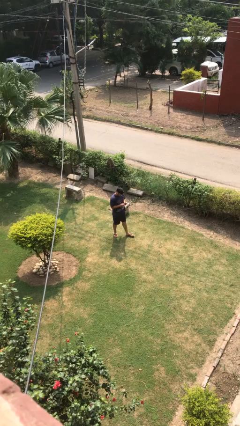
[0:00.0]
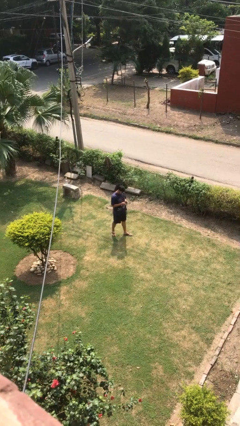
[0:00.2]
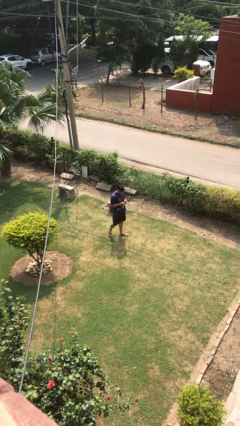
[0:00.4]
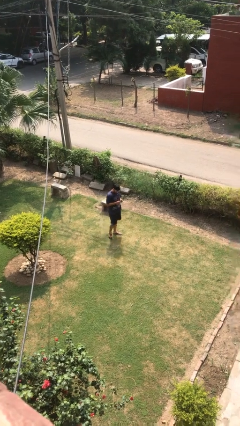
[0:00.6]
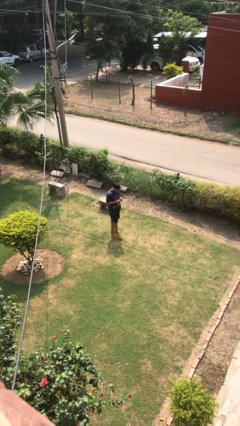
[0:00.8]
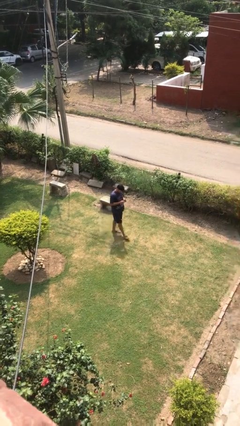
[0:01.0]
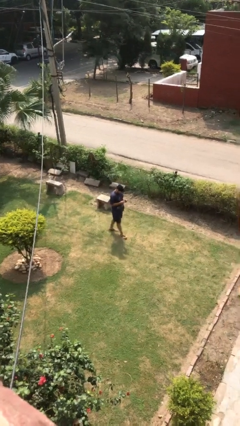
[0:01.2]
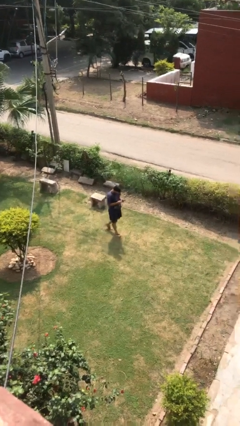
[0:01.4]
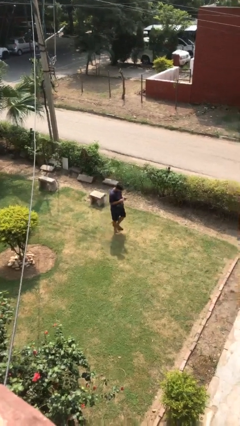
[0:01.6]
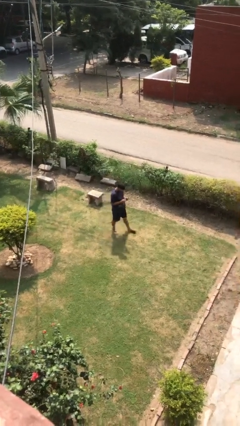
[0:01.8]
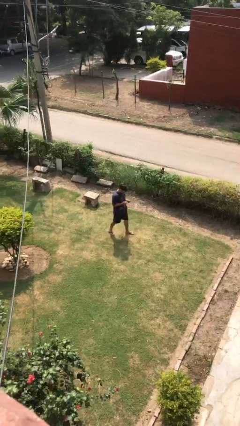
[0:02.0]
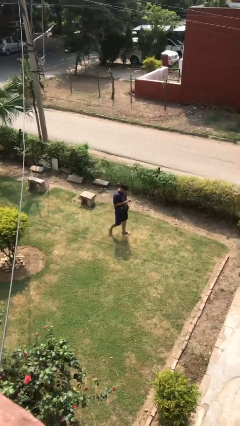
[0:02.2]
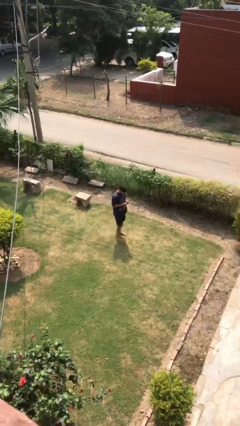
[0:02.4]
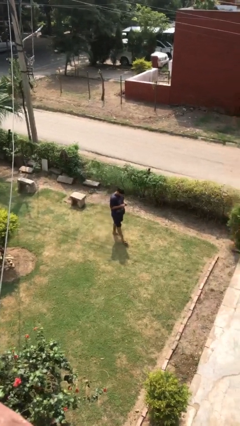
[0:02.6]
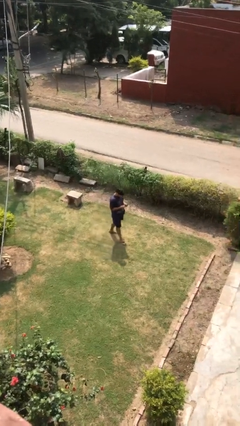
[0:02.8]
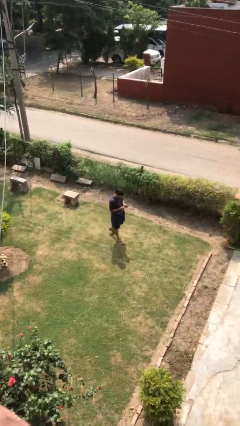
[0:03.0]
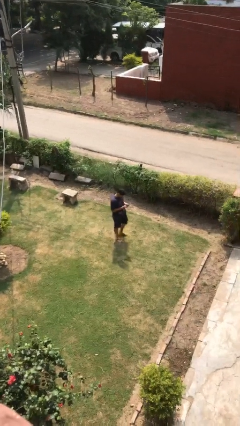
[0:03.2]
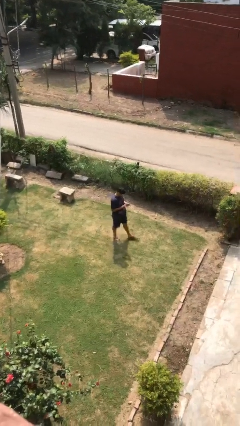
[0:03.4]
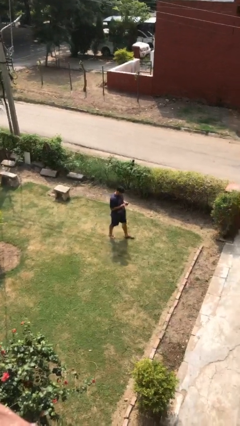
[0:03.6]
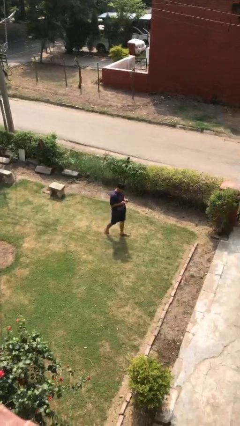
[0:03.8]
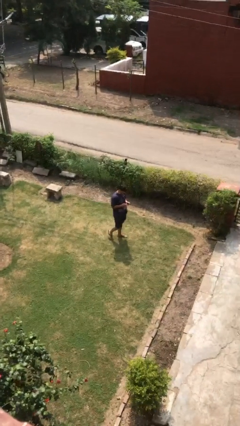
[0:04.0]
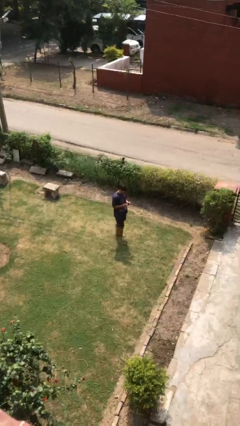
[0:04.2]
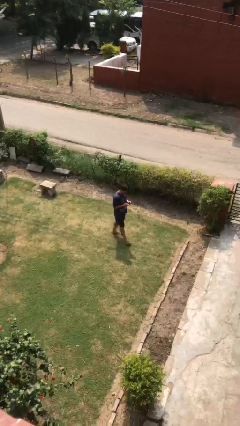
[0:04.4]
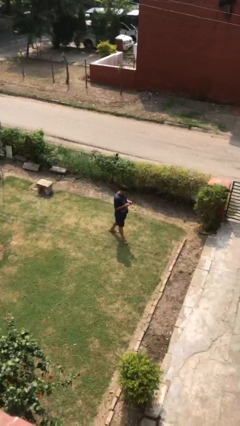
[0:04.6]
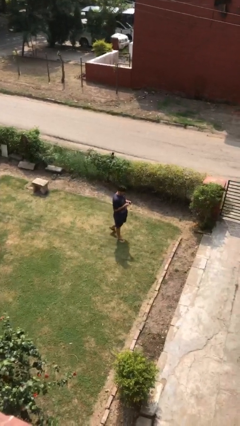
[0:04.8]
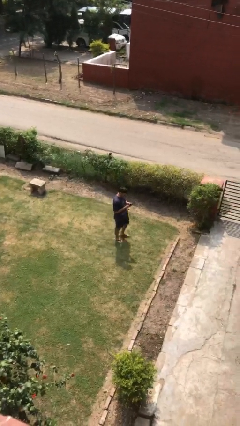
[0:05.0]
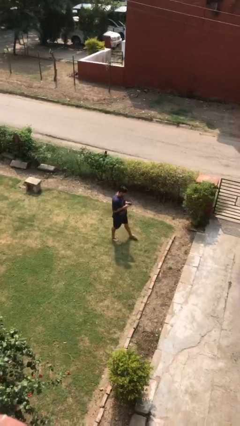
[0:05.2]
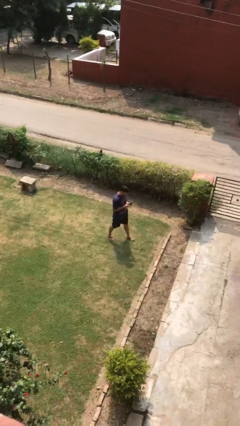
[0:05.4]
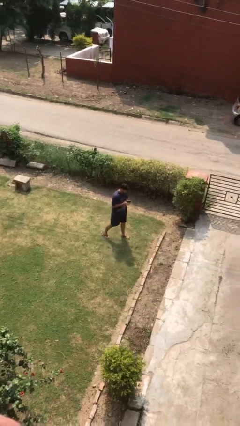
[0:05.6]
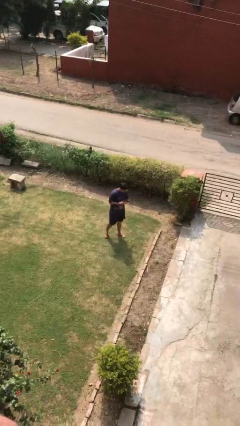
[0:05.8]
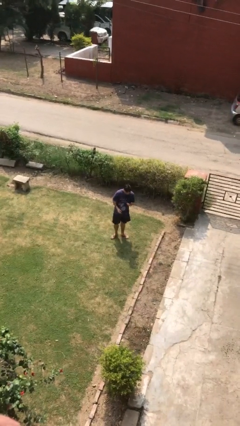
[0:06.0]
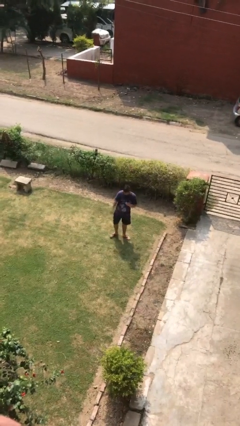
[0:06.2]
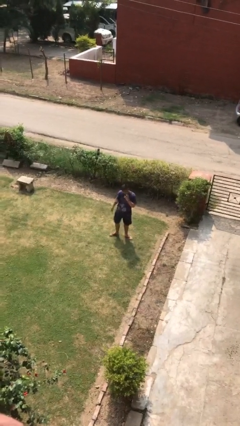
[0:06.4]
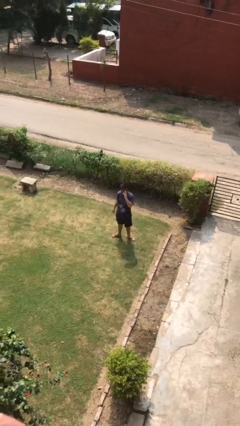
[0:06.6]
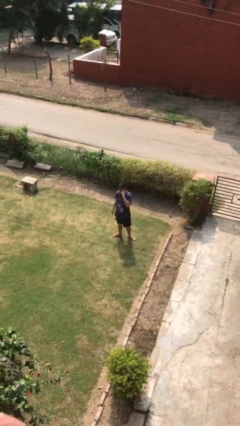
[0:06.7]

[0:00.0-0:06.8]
person texts on phone

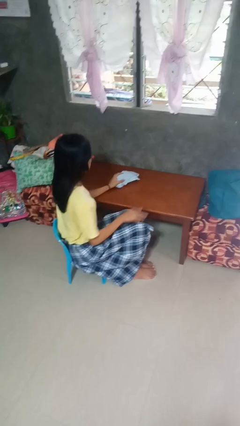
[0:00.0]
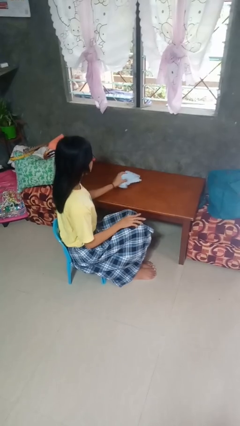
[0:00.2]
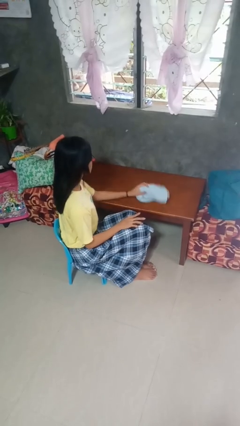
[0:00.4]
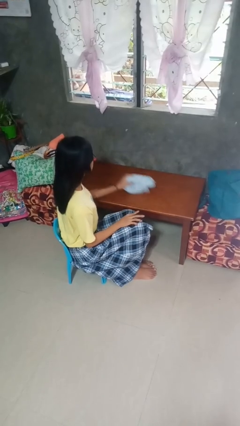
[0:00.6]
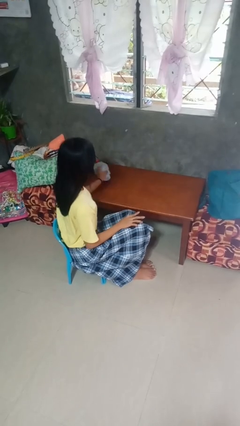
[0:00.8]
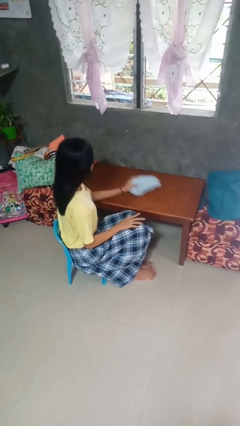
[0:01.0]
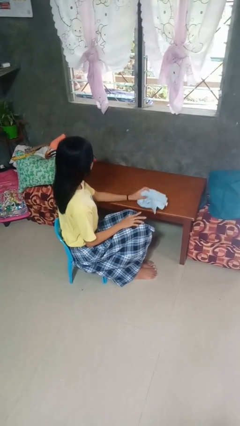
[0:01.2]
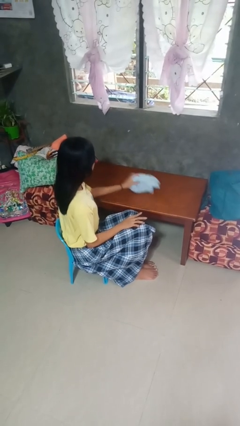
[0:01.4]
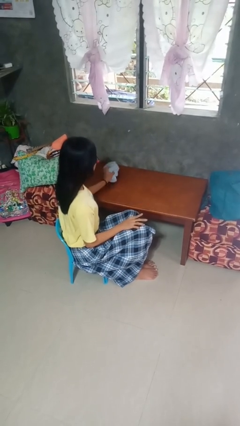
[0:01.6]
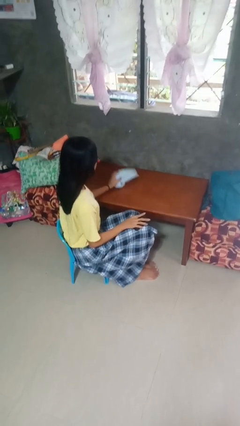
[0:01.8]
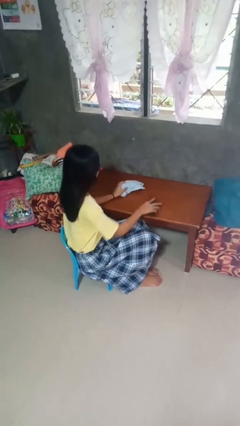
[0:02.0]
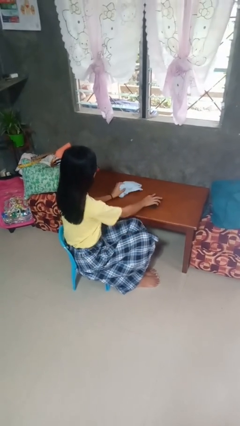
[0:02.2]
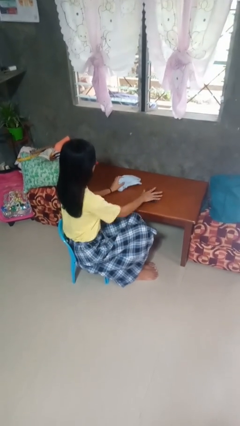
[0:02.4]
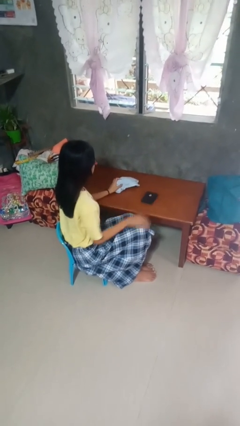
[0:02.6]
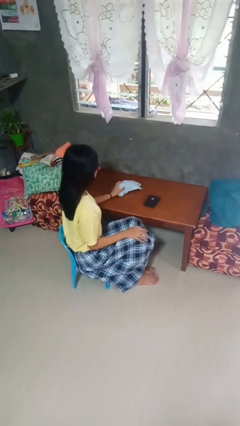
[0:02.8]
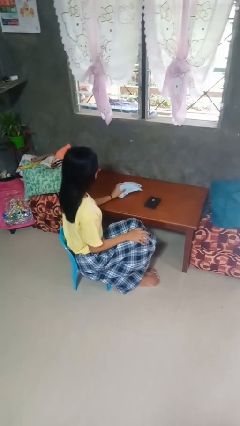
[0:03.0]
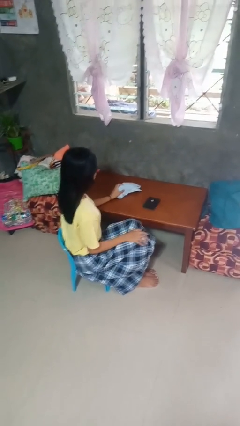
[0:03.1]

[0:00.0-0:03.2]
person cleans table with rag

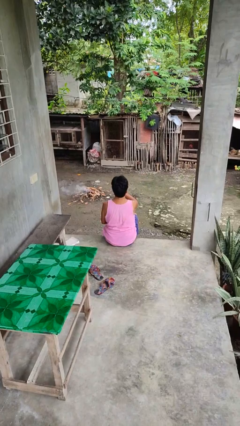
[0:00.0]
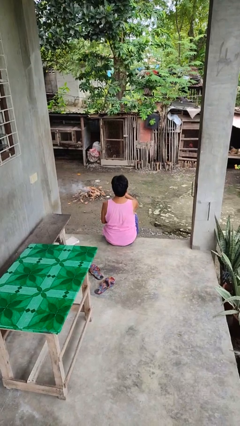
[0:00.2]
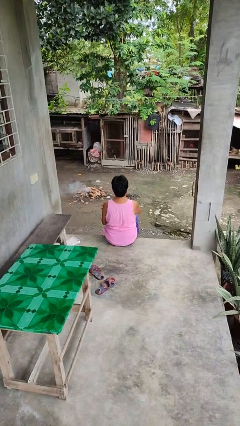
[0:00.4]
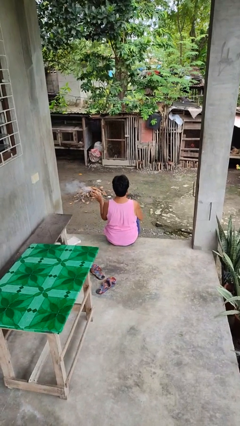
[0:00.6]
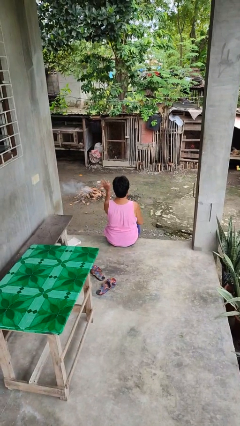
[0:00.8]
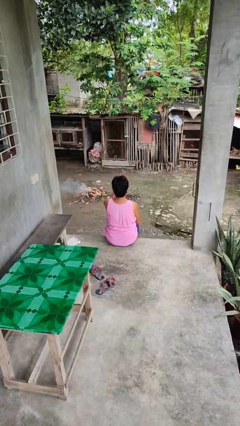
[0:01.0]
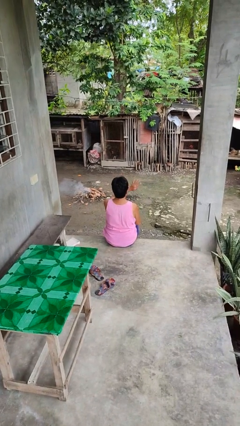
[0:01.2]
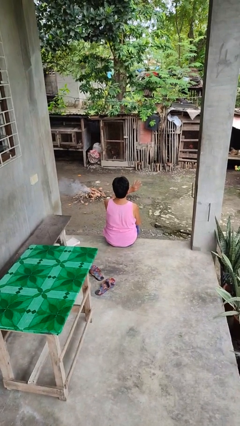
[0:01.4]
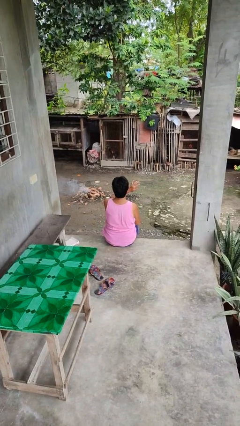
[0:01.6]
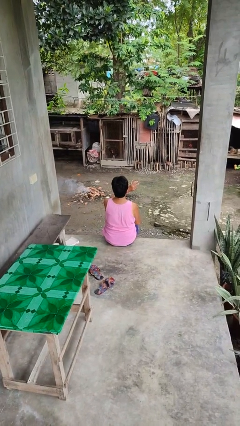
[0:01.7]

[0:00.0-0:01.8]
person gestures swipe right

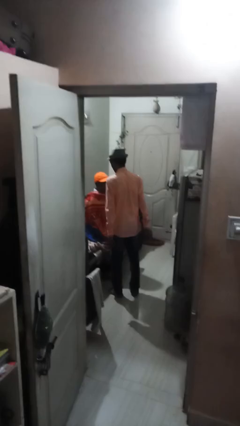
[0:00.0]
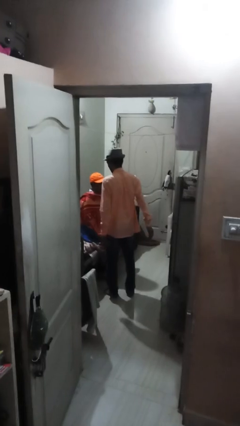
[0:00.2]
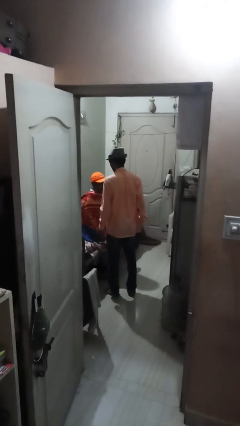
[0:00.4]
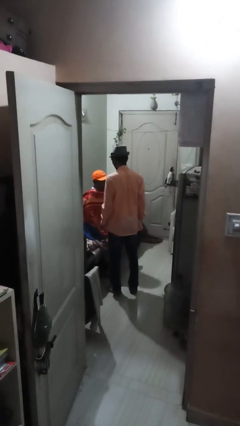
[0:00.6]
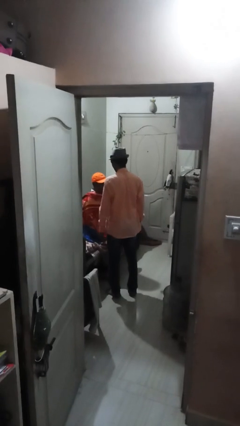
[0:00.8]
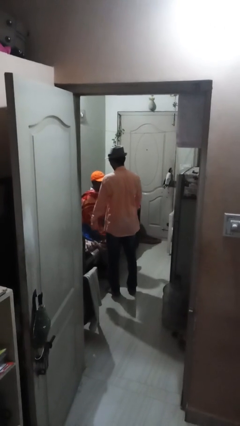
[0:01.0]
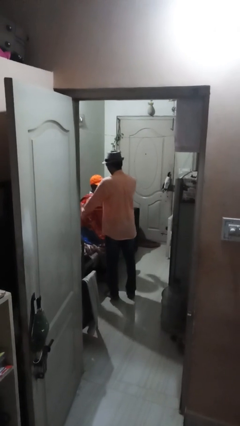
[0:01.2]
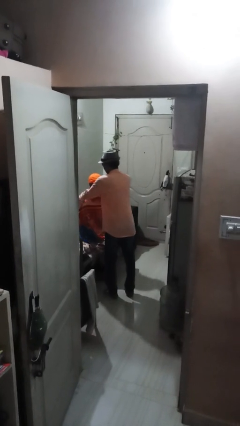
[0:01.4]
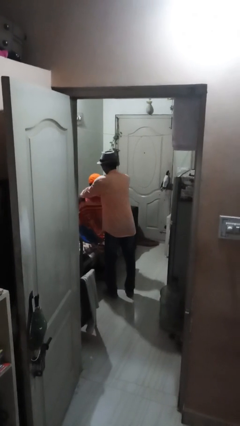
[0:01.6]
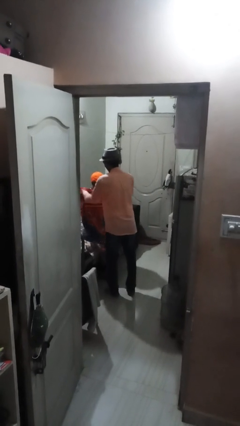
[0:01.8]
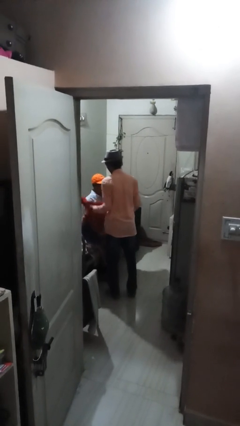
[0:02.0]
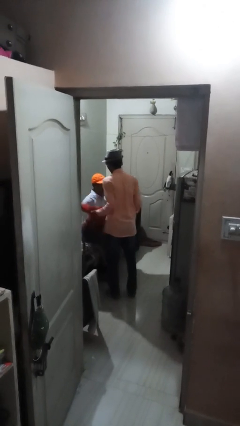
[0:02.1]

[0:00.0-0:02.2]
person covers friend with blanket

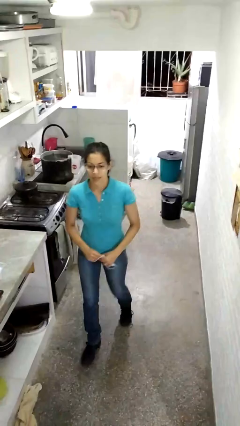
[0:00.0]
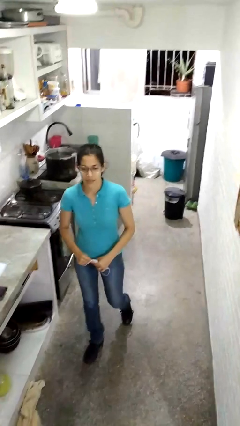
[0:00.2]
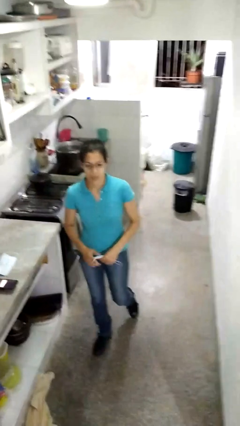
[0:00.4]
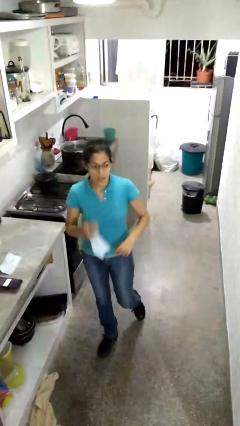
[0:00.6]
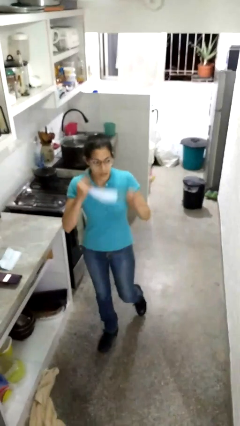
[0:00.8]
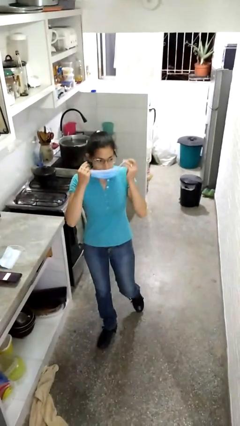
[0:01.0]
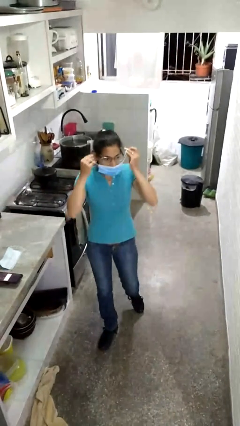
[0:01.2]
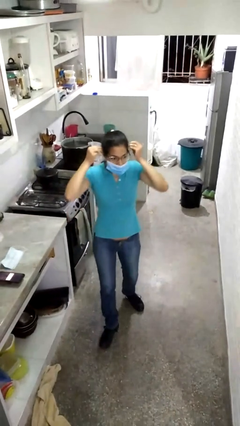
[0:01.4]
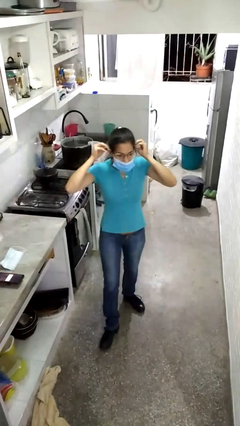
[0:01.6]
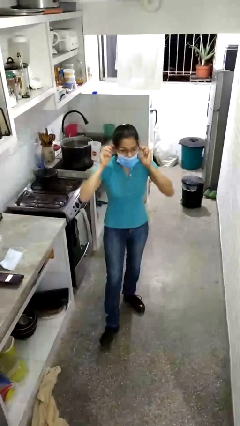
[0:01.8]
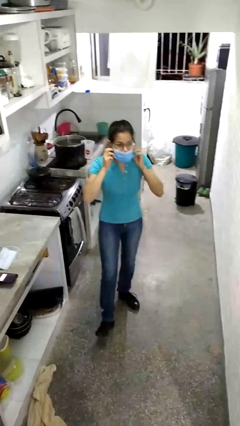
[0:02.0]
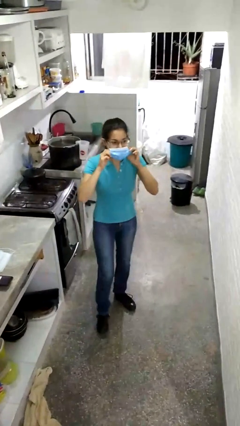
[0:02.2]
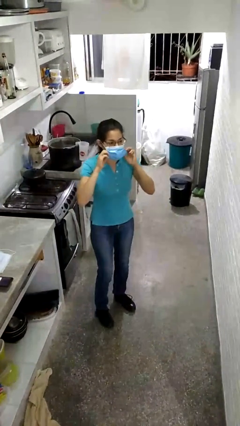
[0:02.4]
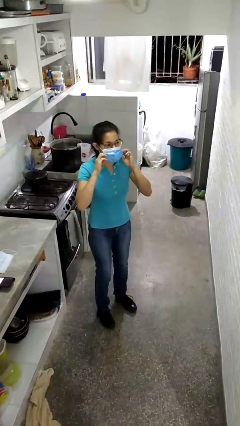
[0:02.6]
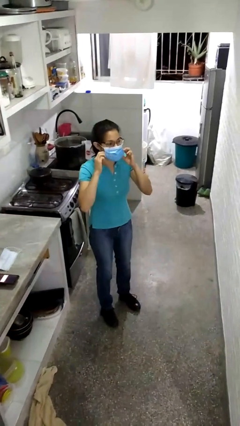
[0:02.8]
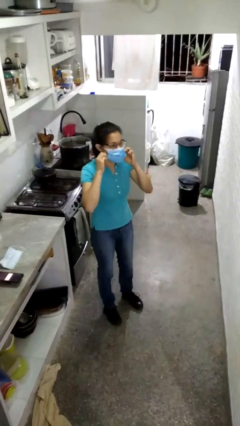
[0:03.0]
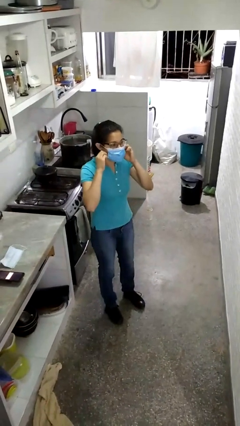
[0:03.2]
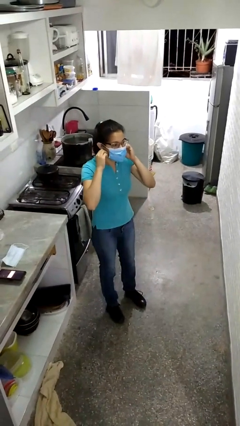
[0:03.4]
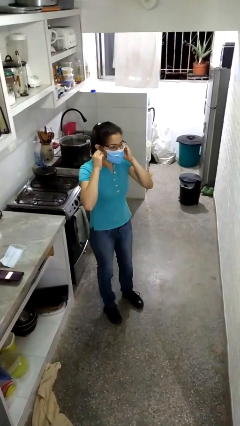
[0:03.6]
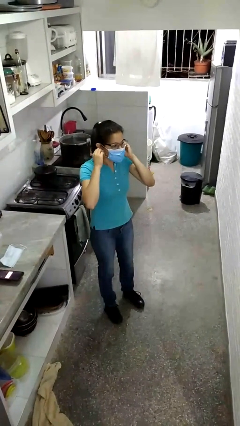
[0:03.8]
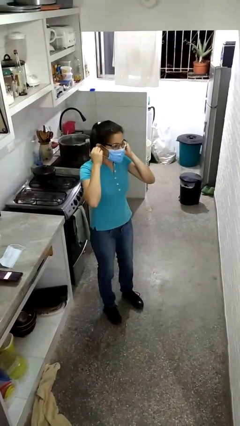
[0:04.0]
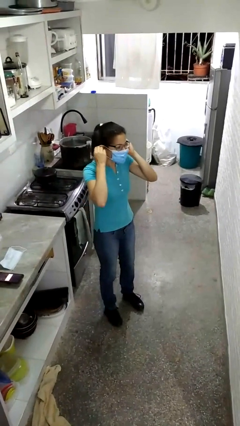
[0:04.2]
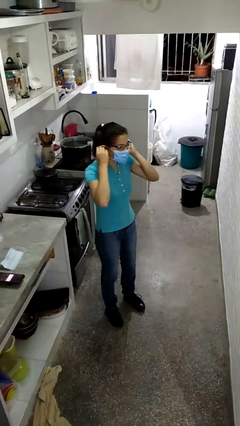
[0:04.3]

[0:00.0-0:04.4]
person puts on facemask
